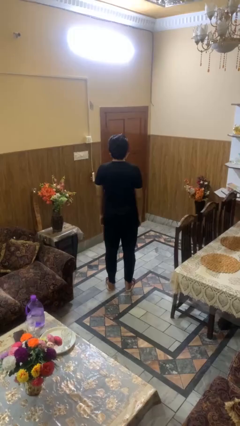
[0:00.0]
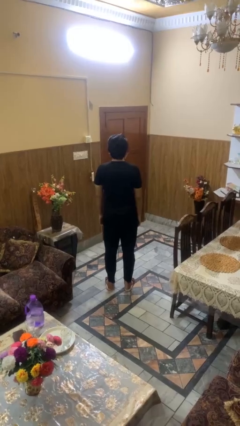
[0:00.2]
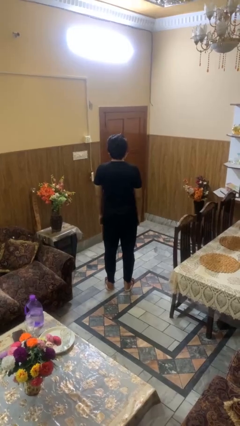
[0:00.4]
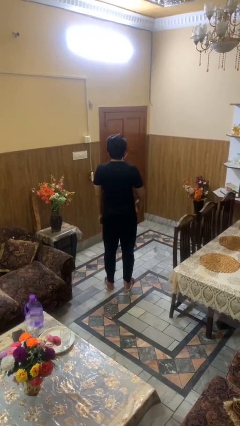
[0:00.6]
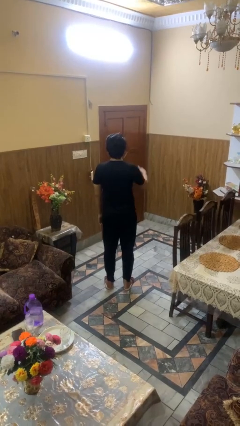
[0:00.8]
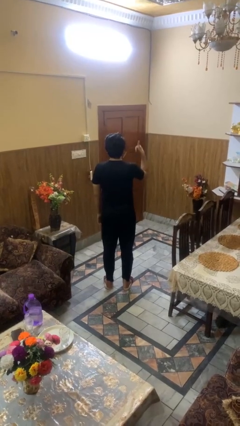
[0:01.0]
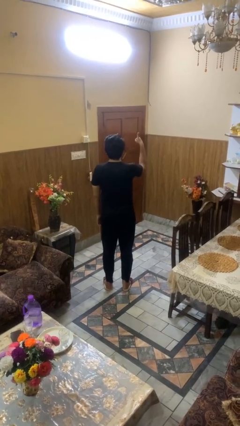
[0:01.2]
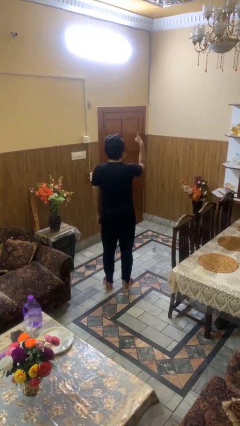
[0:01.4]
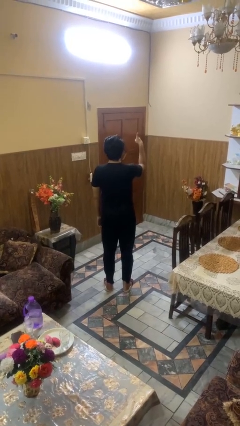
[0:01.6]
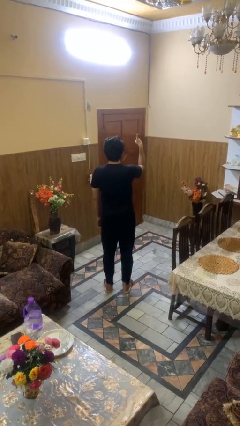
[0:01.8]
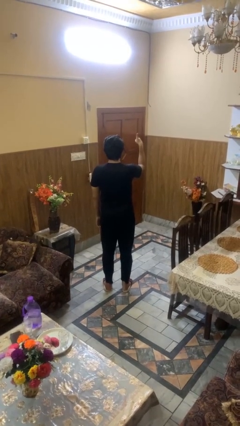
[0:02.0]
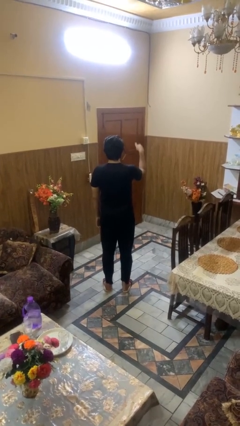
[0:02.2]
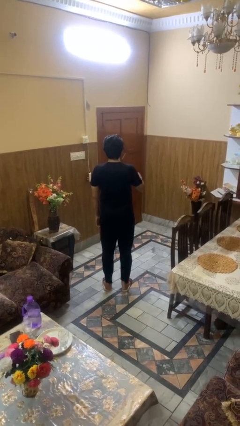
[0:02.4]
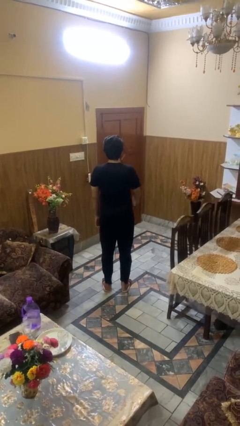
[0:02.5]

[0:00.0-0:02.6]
person gestures thumbs up

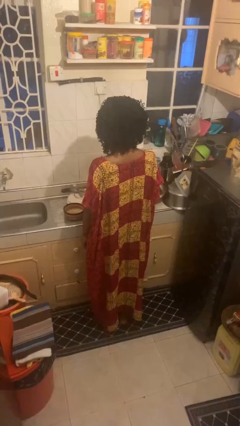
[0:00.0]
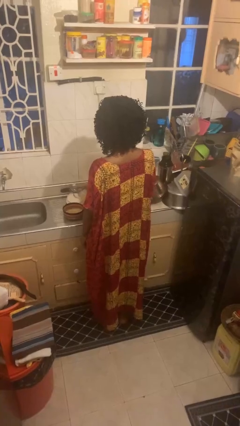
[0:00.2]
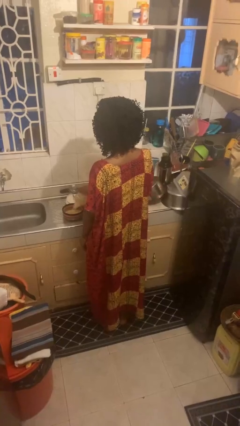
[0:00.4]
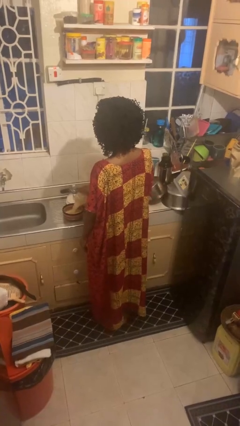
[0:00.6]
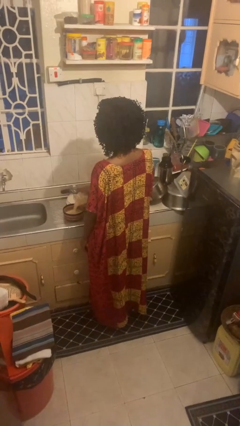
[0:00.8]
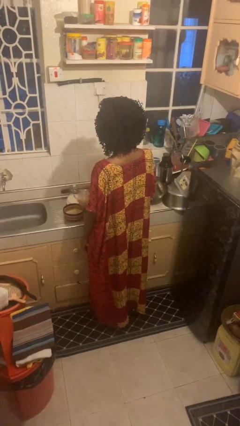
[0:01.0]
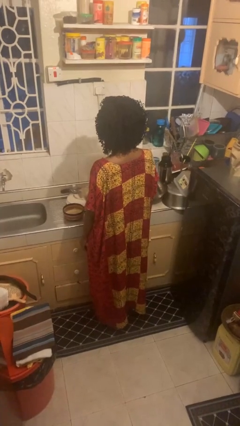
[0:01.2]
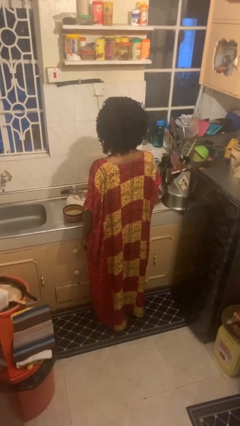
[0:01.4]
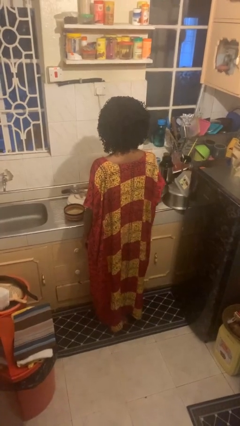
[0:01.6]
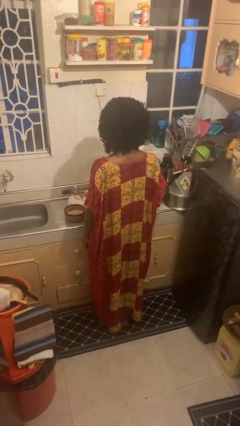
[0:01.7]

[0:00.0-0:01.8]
person pours into bowl

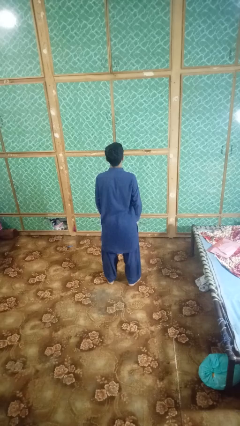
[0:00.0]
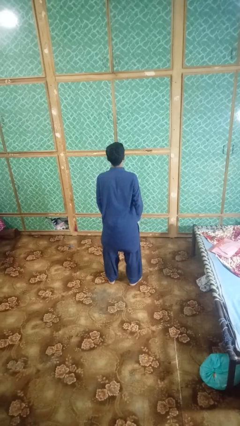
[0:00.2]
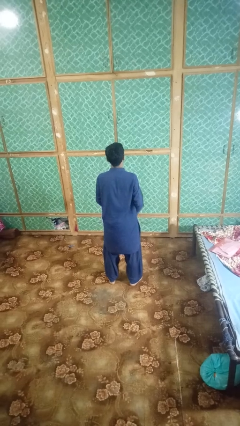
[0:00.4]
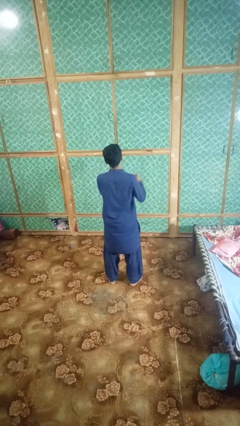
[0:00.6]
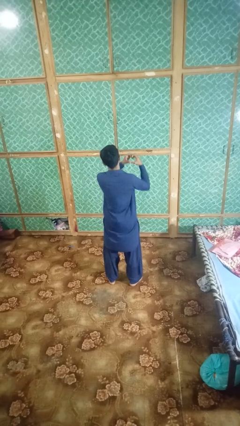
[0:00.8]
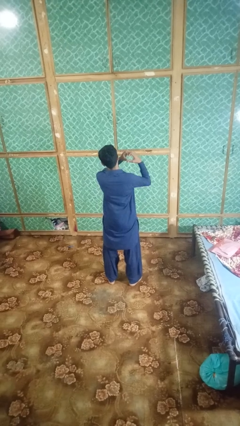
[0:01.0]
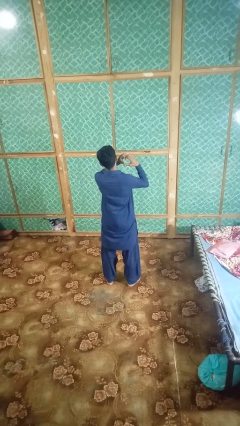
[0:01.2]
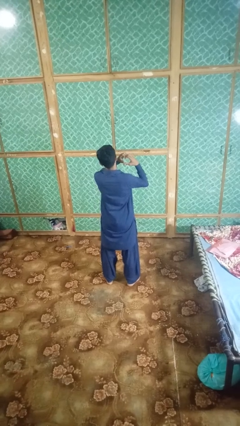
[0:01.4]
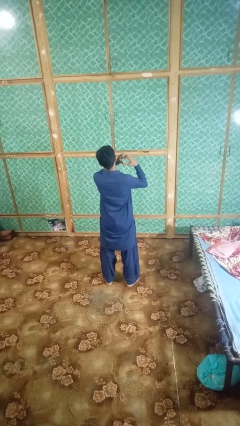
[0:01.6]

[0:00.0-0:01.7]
person gestures heart

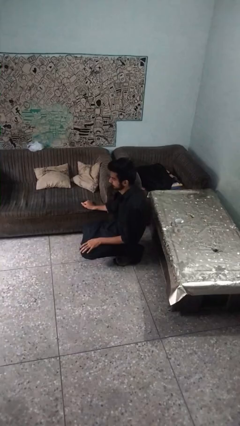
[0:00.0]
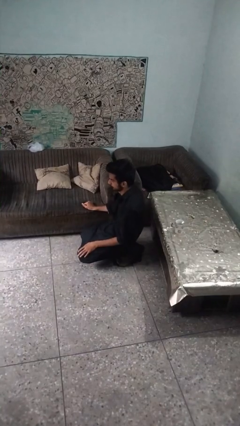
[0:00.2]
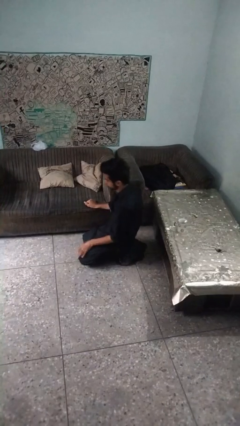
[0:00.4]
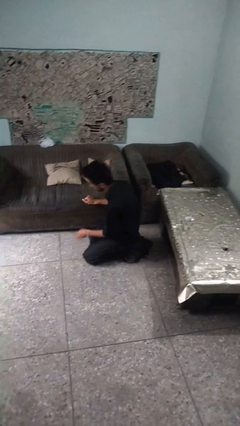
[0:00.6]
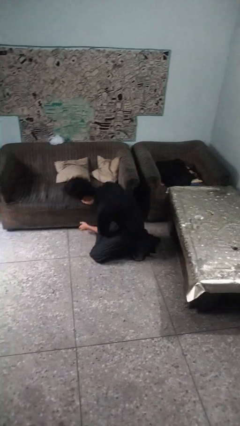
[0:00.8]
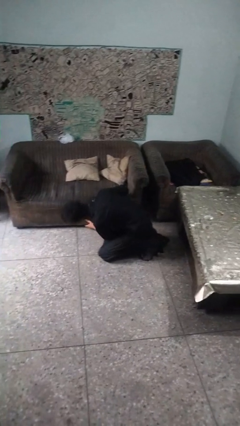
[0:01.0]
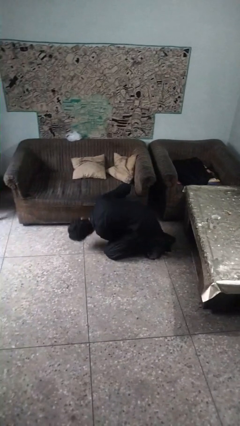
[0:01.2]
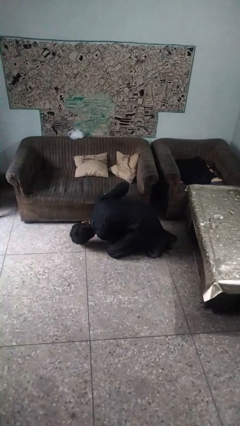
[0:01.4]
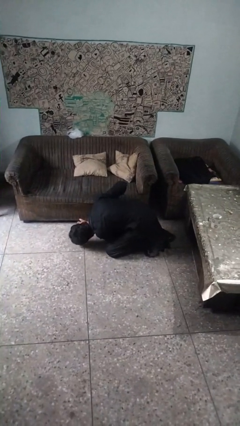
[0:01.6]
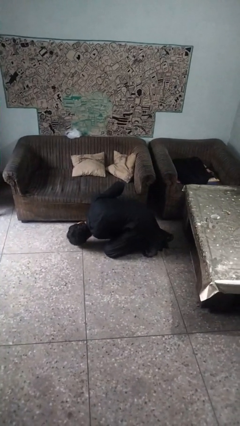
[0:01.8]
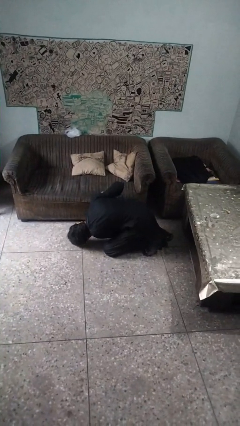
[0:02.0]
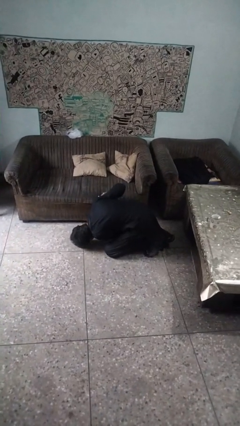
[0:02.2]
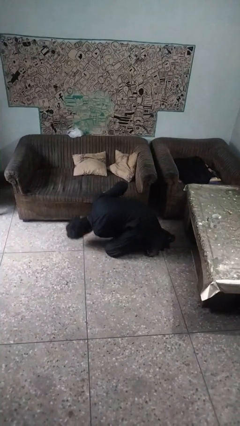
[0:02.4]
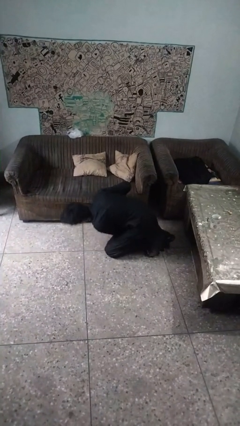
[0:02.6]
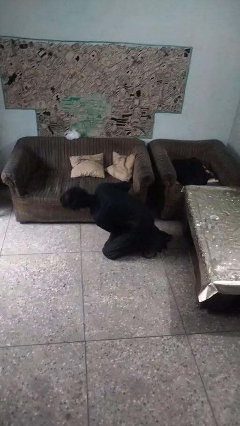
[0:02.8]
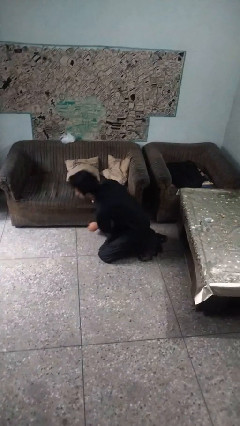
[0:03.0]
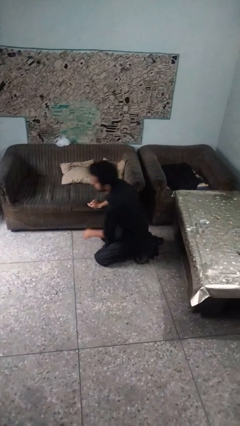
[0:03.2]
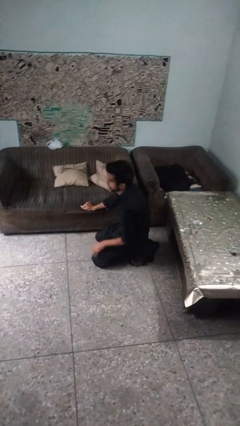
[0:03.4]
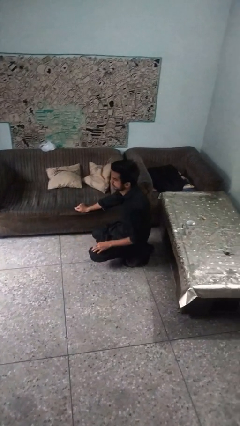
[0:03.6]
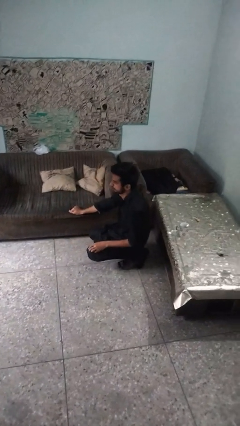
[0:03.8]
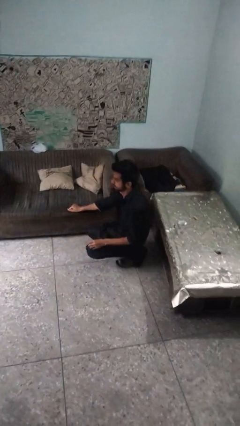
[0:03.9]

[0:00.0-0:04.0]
person searches under couch

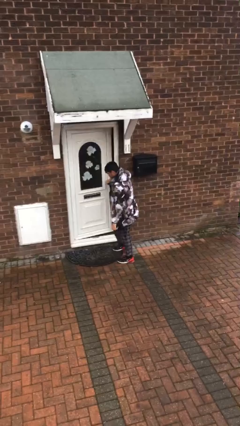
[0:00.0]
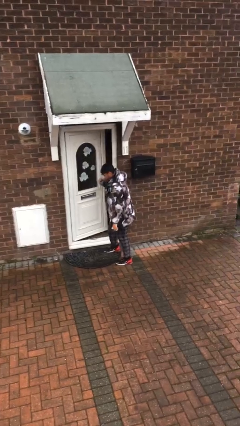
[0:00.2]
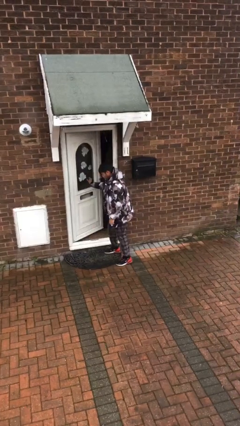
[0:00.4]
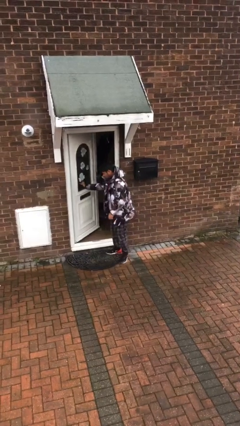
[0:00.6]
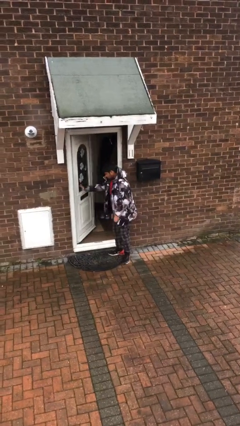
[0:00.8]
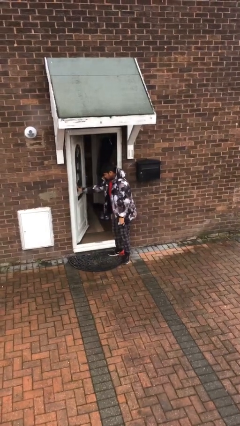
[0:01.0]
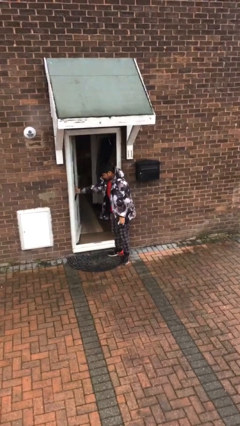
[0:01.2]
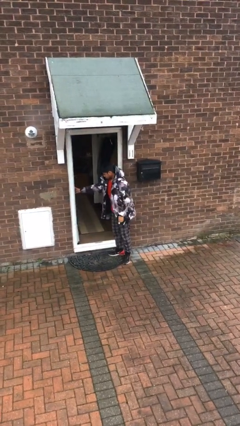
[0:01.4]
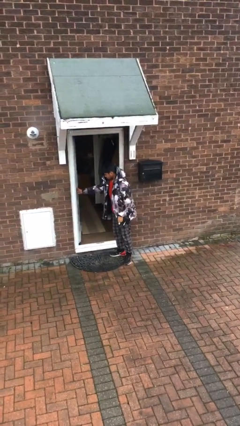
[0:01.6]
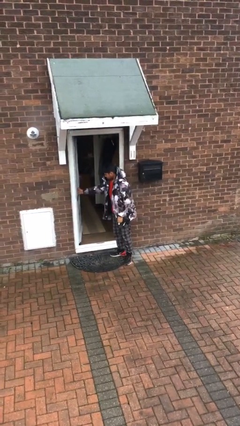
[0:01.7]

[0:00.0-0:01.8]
person opens facility door

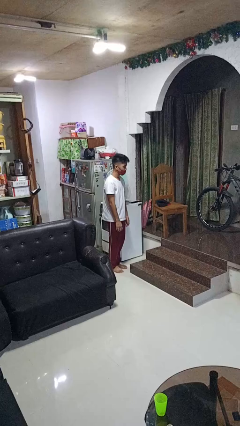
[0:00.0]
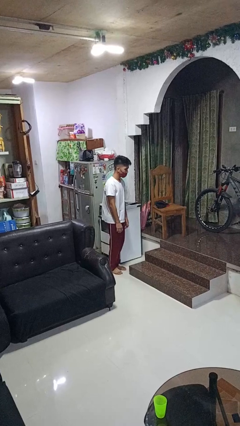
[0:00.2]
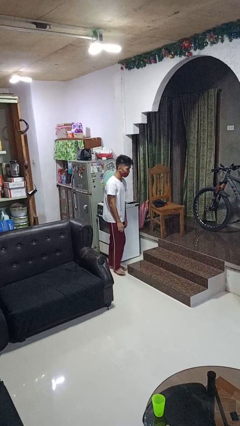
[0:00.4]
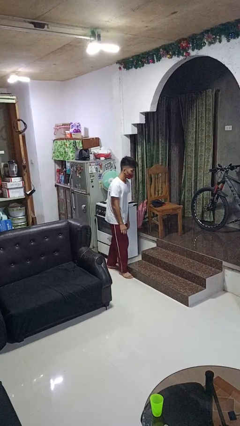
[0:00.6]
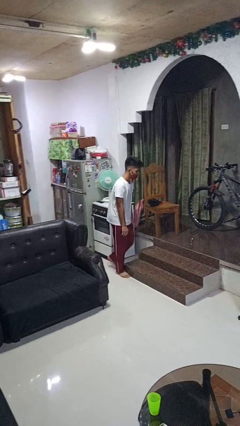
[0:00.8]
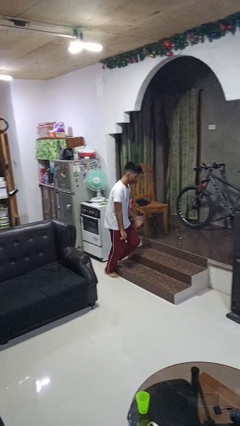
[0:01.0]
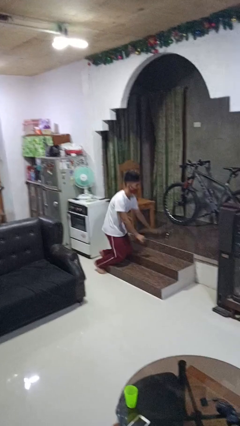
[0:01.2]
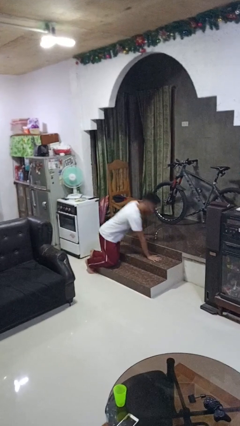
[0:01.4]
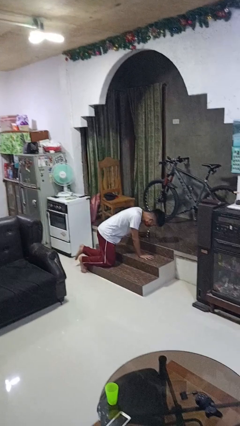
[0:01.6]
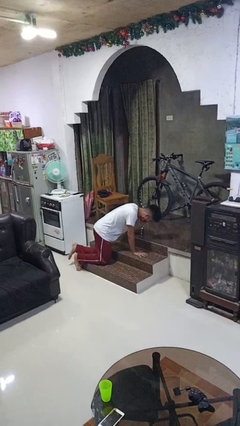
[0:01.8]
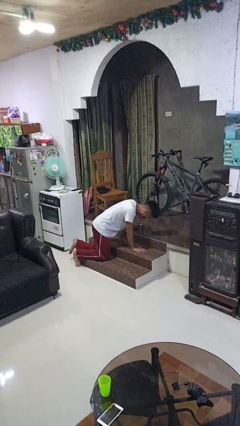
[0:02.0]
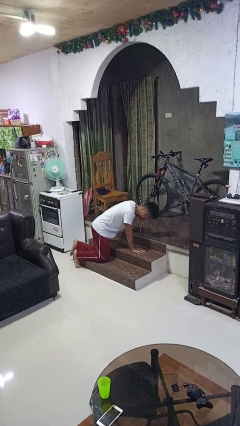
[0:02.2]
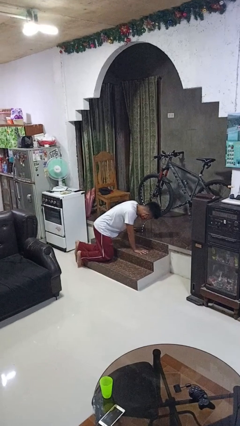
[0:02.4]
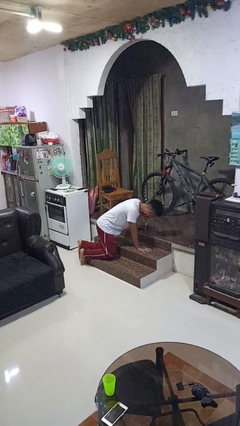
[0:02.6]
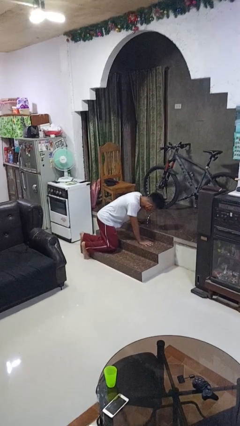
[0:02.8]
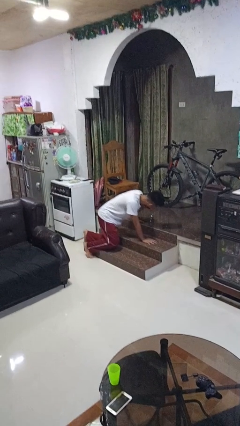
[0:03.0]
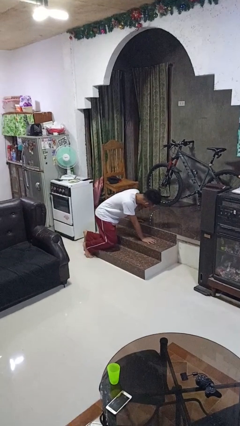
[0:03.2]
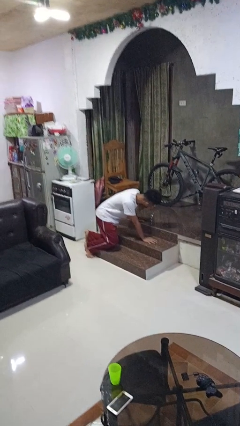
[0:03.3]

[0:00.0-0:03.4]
person trips on object on floor

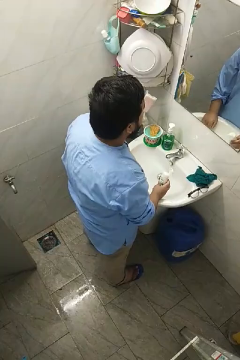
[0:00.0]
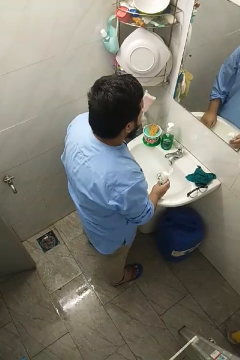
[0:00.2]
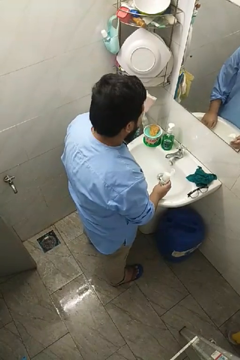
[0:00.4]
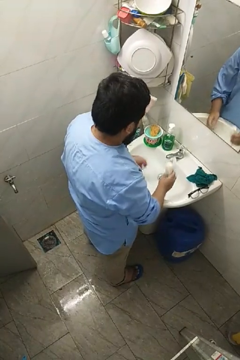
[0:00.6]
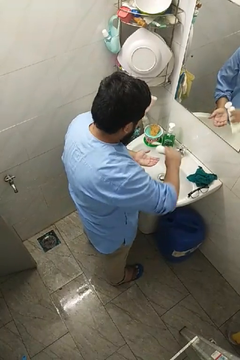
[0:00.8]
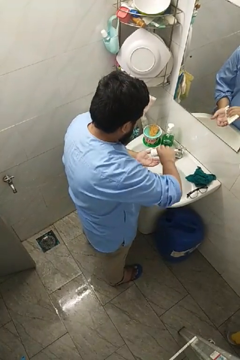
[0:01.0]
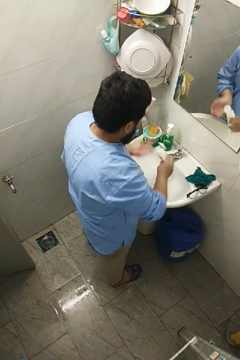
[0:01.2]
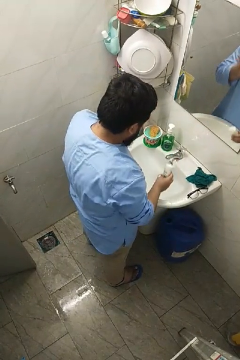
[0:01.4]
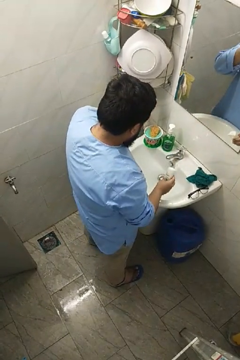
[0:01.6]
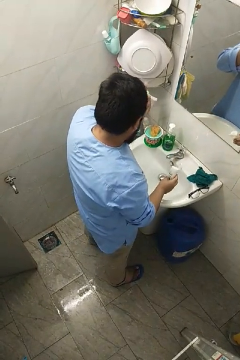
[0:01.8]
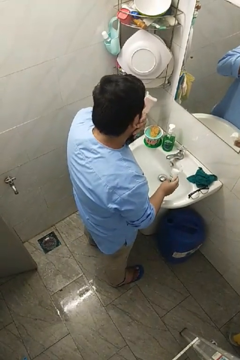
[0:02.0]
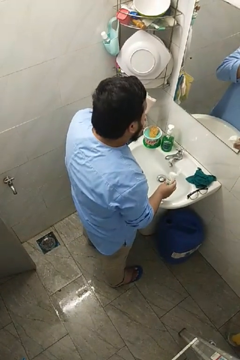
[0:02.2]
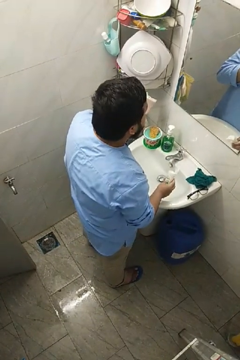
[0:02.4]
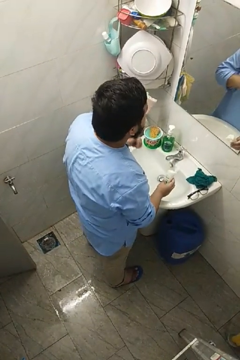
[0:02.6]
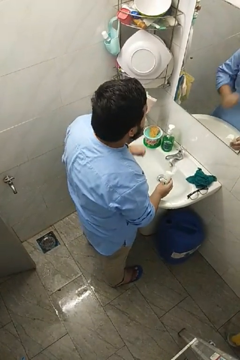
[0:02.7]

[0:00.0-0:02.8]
person applies facial moisturizer
